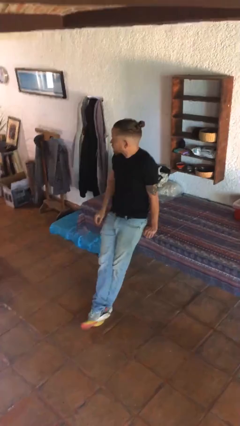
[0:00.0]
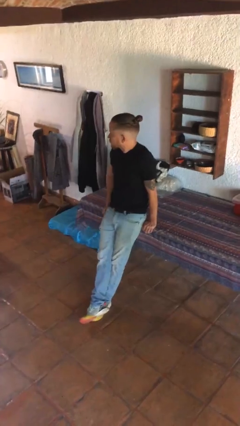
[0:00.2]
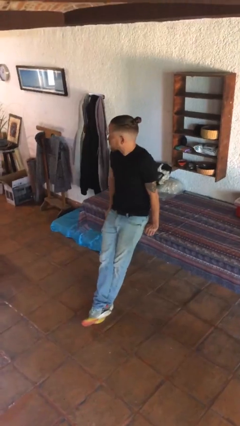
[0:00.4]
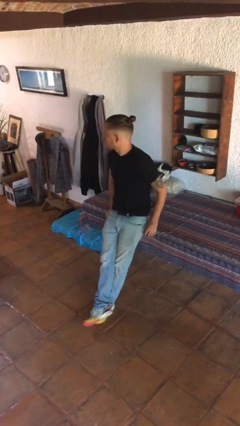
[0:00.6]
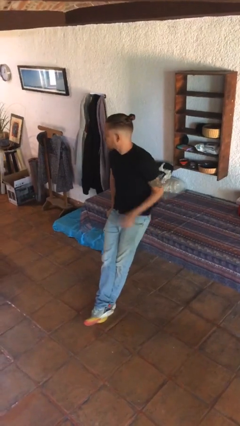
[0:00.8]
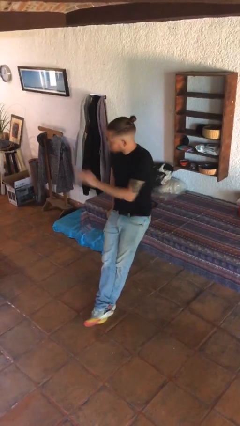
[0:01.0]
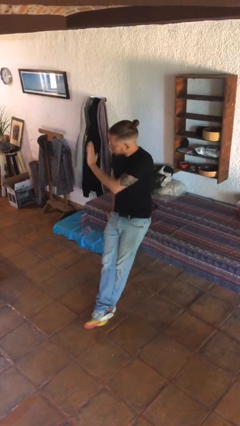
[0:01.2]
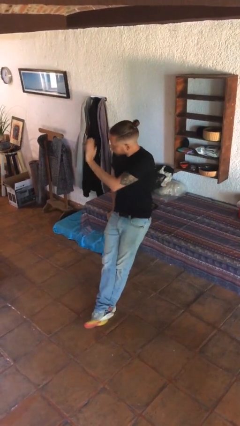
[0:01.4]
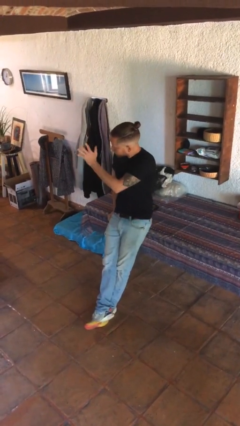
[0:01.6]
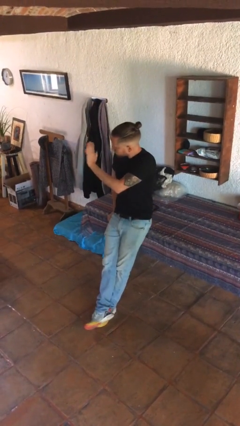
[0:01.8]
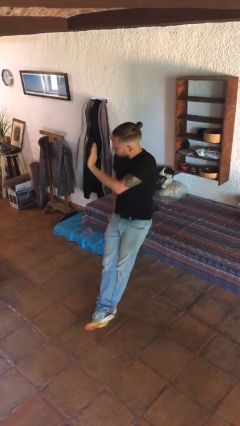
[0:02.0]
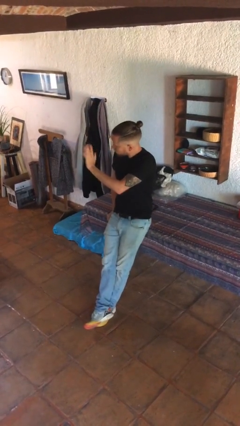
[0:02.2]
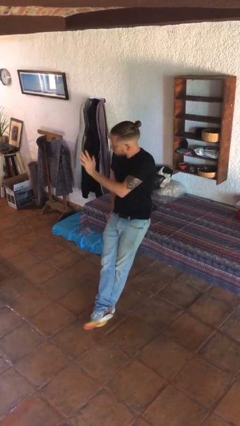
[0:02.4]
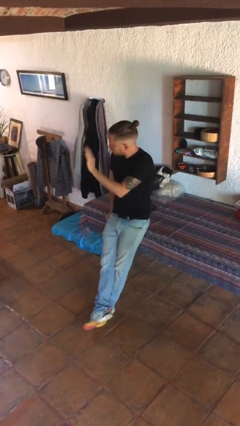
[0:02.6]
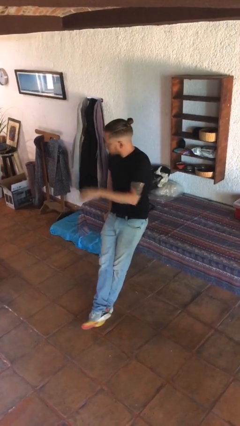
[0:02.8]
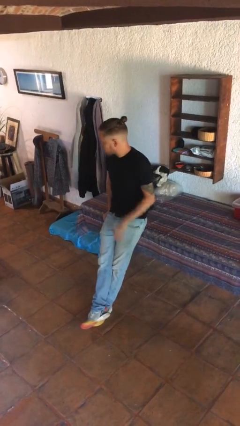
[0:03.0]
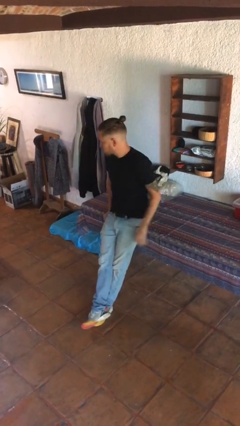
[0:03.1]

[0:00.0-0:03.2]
person waves at person

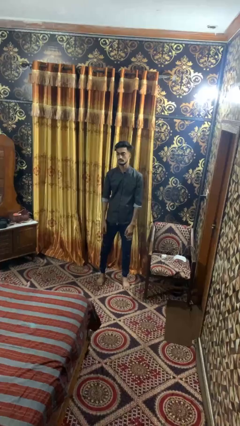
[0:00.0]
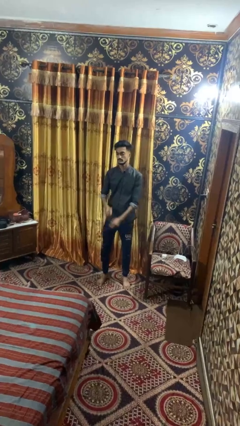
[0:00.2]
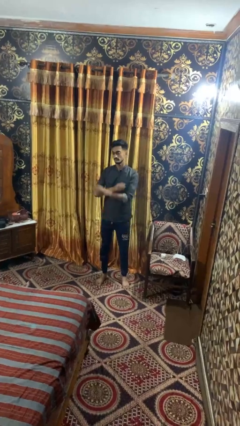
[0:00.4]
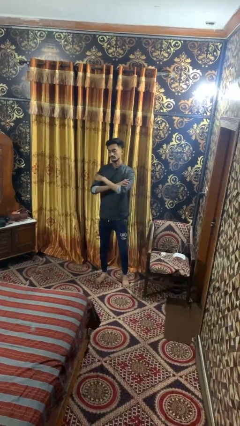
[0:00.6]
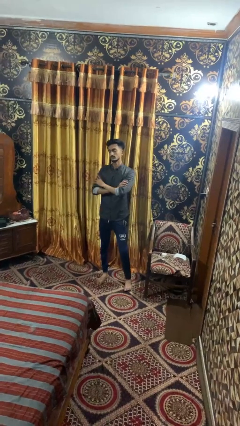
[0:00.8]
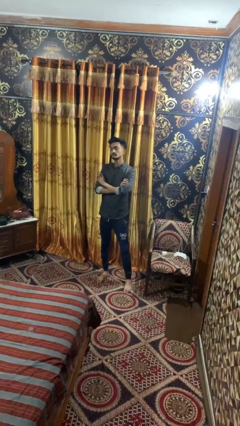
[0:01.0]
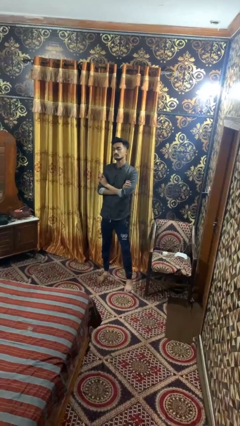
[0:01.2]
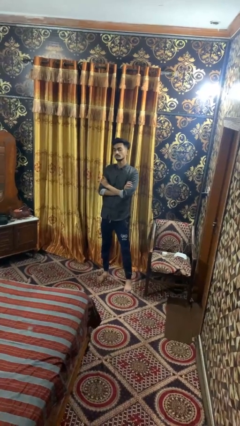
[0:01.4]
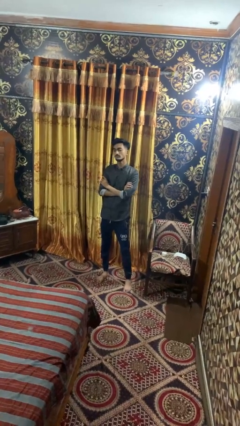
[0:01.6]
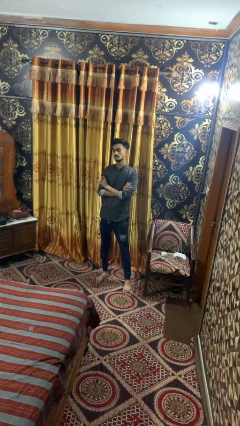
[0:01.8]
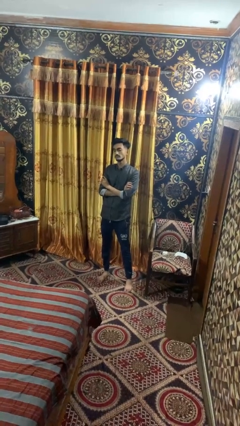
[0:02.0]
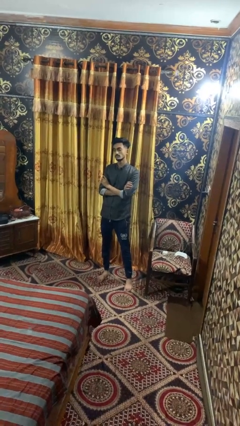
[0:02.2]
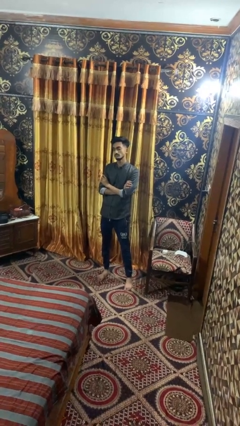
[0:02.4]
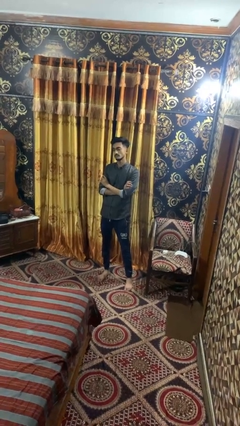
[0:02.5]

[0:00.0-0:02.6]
person crosses arms

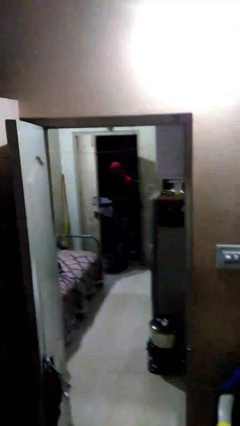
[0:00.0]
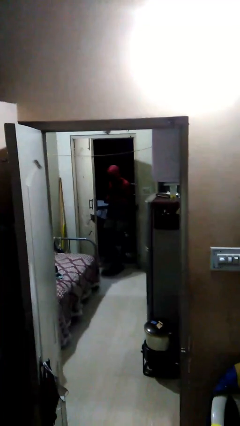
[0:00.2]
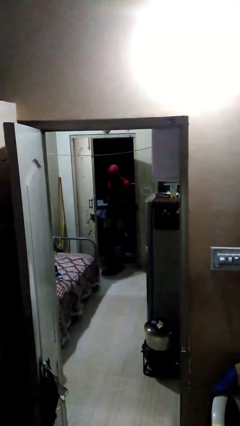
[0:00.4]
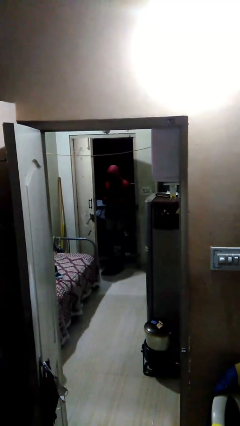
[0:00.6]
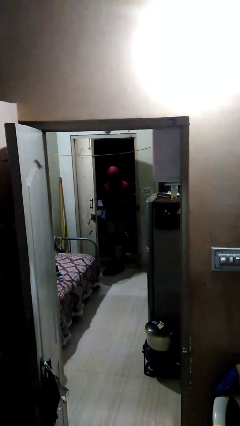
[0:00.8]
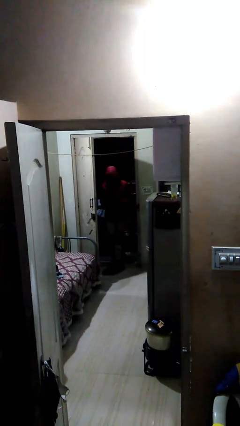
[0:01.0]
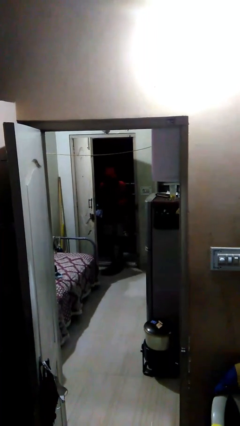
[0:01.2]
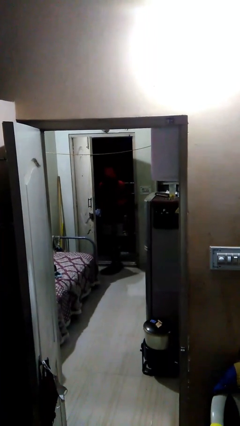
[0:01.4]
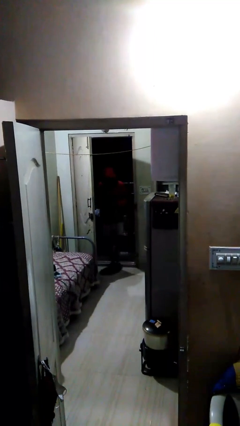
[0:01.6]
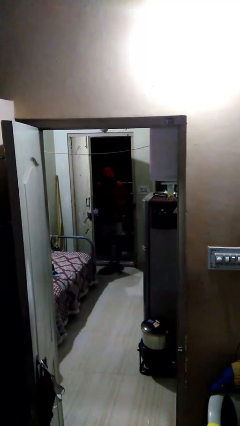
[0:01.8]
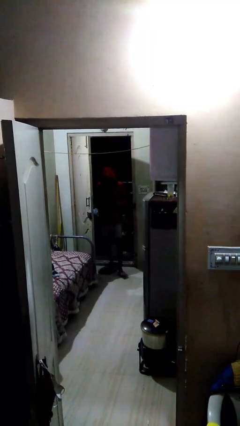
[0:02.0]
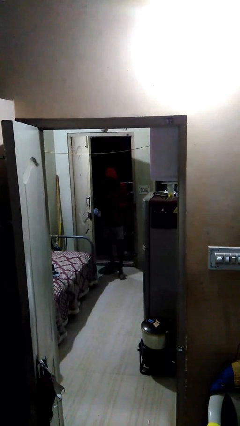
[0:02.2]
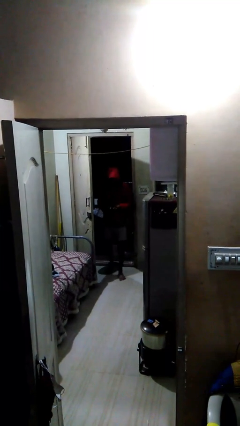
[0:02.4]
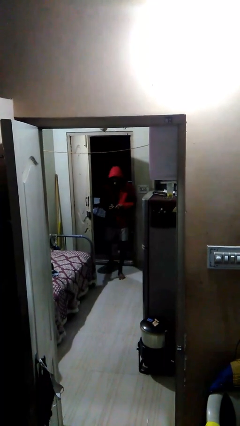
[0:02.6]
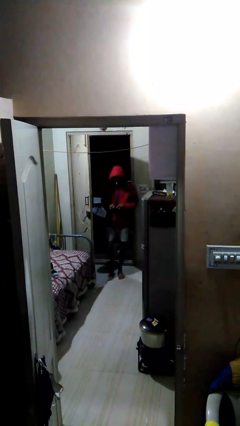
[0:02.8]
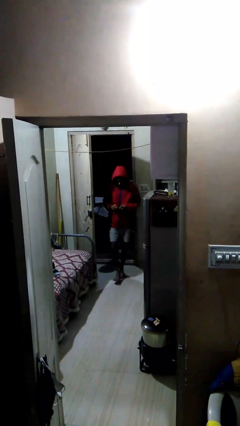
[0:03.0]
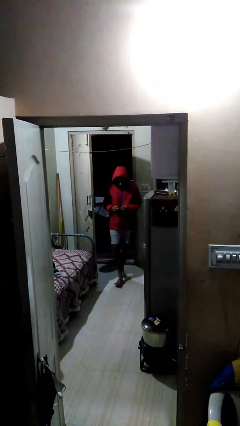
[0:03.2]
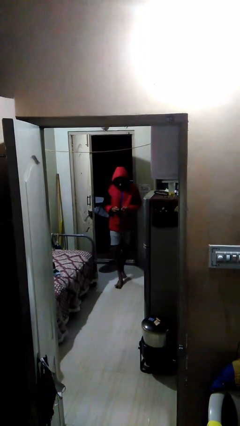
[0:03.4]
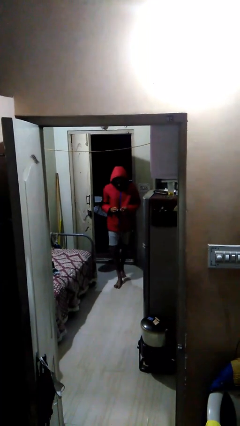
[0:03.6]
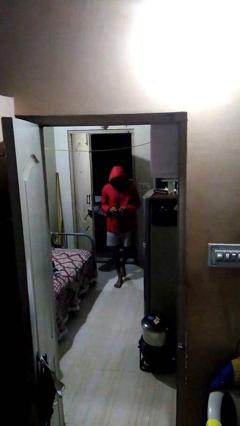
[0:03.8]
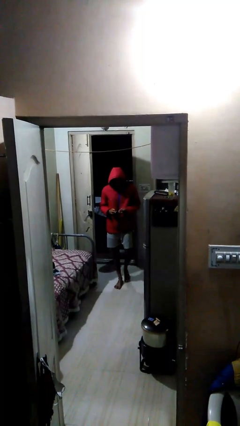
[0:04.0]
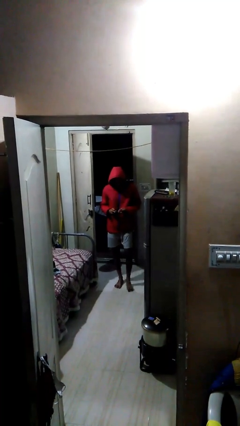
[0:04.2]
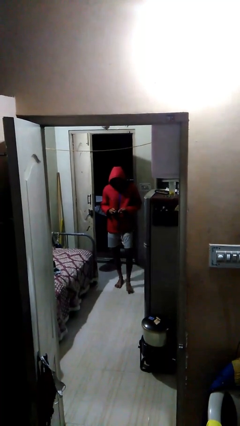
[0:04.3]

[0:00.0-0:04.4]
person enters scene through structure

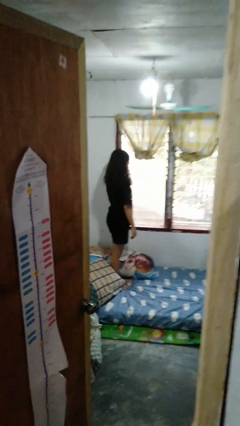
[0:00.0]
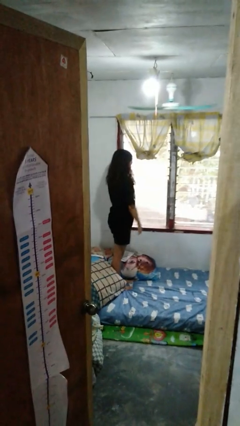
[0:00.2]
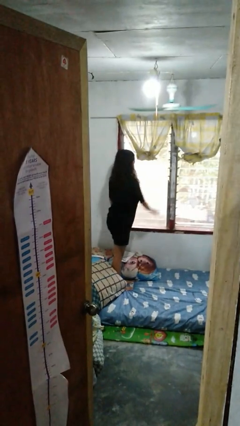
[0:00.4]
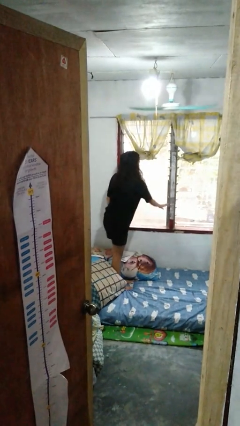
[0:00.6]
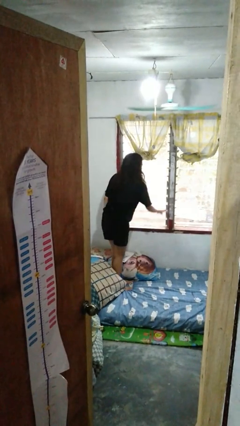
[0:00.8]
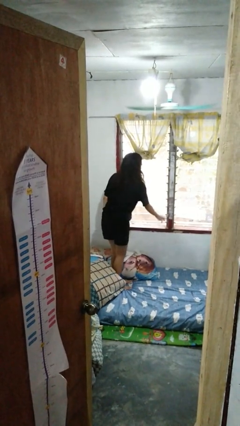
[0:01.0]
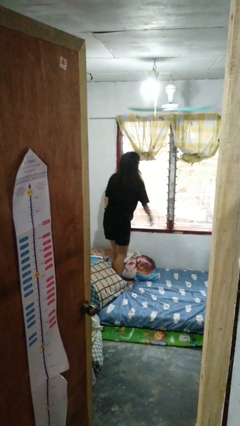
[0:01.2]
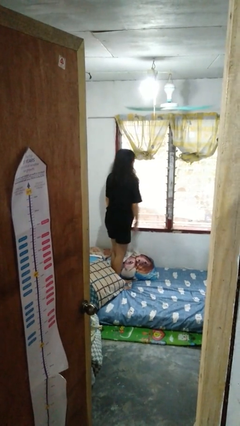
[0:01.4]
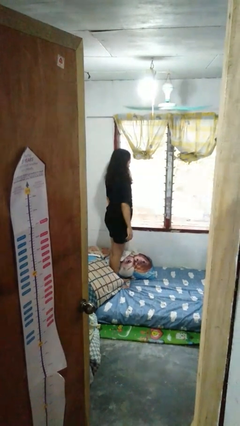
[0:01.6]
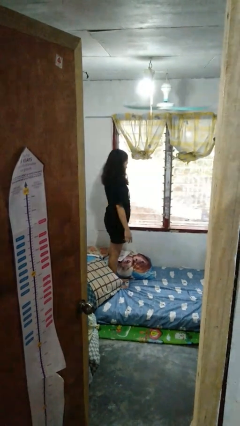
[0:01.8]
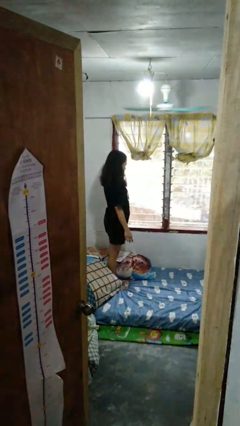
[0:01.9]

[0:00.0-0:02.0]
person opens home window

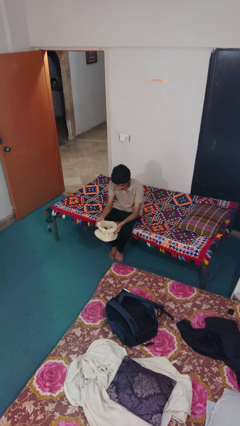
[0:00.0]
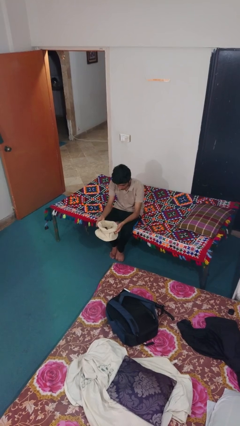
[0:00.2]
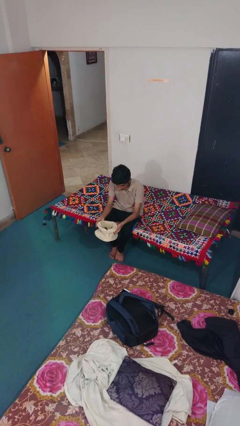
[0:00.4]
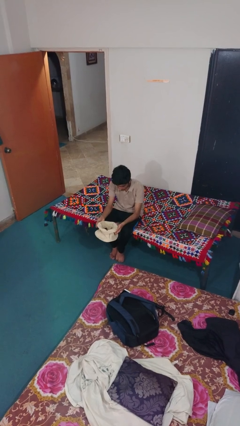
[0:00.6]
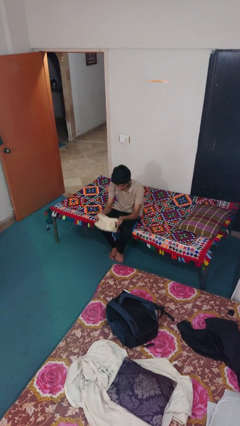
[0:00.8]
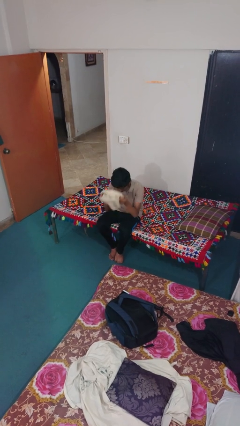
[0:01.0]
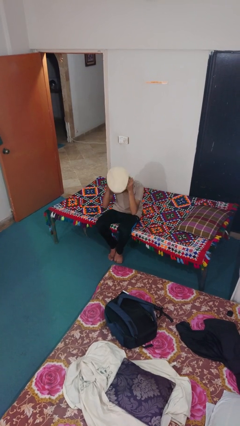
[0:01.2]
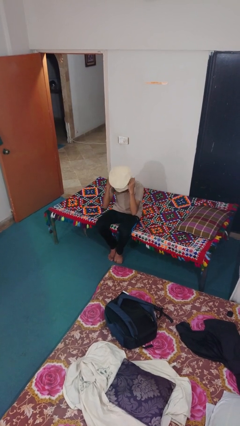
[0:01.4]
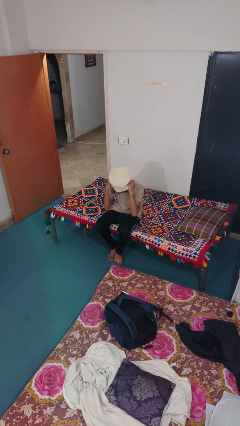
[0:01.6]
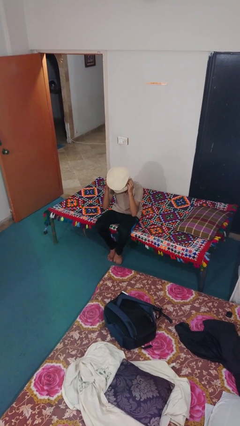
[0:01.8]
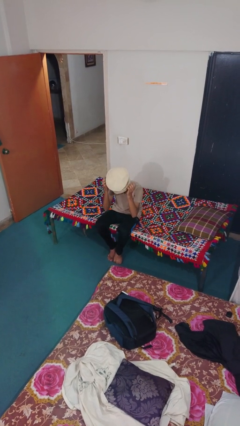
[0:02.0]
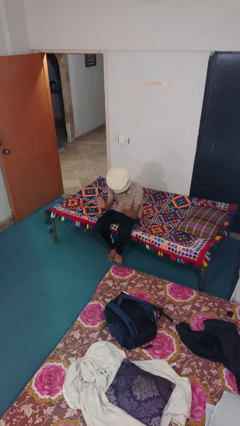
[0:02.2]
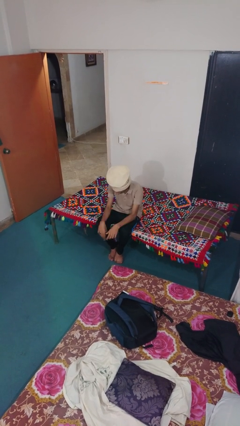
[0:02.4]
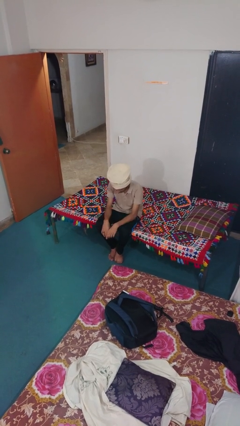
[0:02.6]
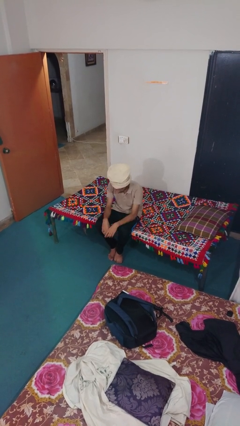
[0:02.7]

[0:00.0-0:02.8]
person puts on hat

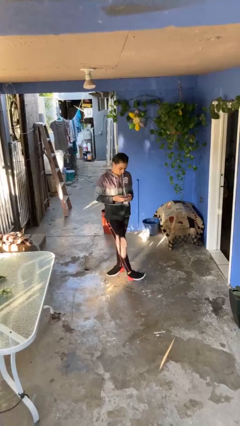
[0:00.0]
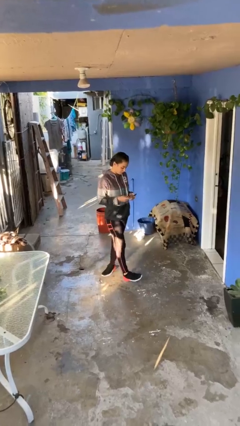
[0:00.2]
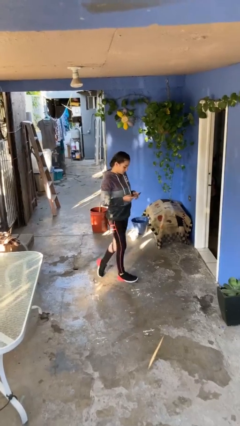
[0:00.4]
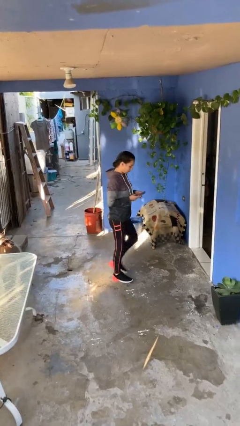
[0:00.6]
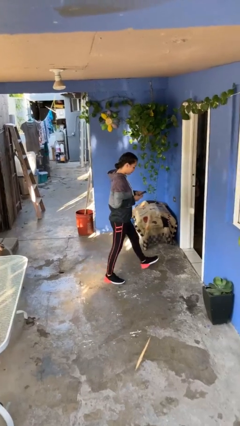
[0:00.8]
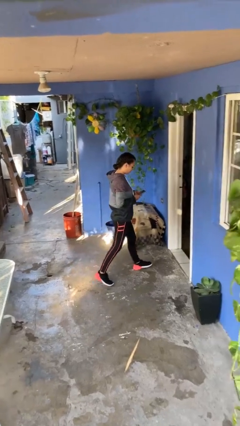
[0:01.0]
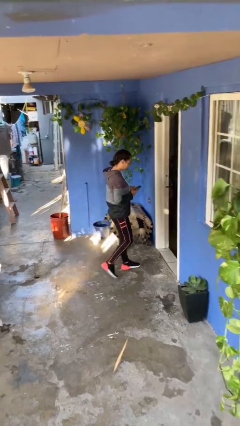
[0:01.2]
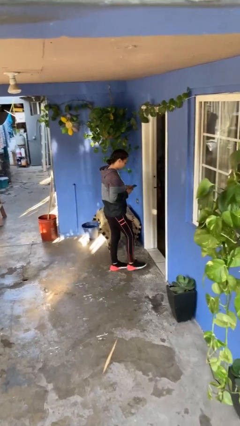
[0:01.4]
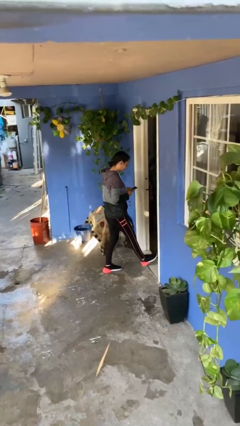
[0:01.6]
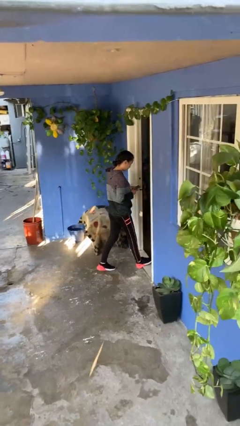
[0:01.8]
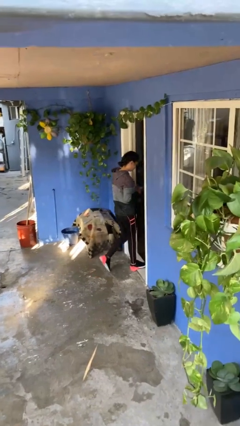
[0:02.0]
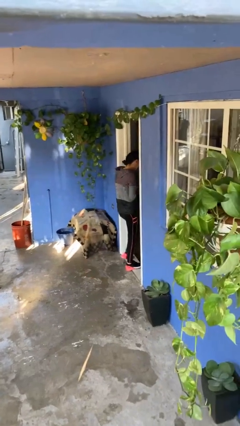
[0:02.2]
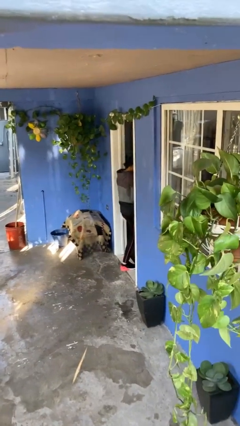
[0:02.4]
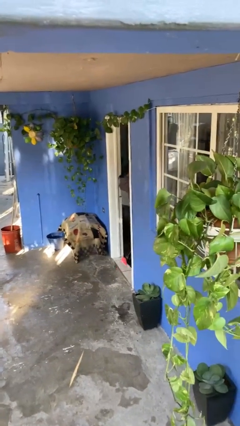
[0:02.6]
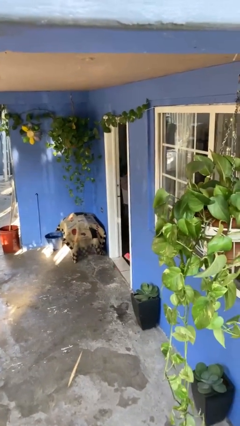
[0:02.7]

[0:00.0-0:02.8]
person exits scene through structure
